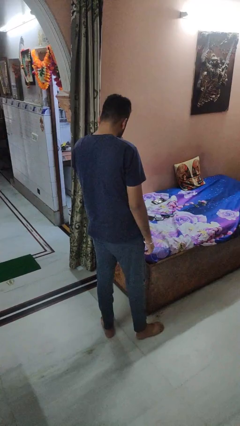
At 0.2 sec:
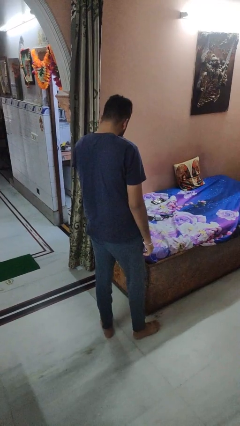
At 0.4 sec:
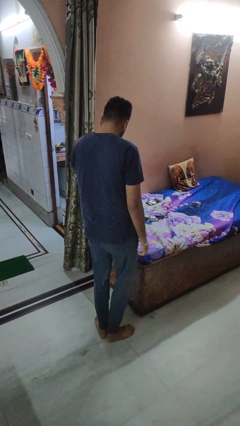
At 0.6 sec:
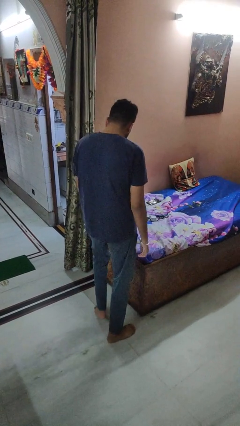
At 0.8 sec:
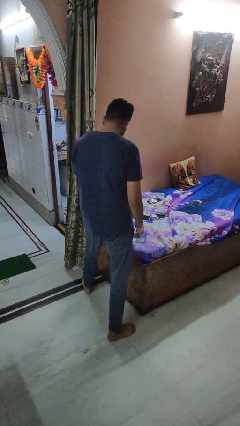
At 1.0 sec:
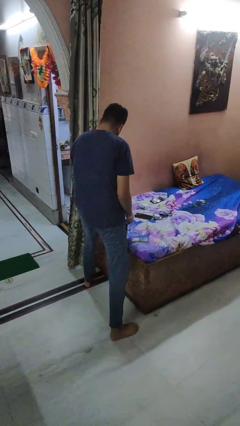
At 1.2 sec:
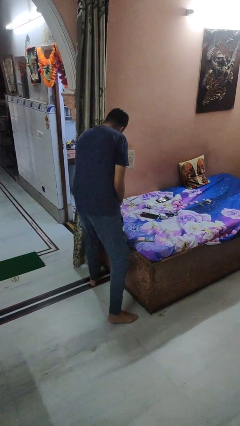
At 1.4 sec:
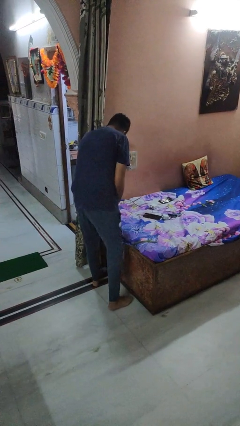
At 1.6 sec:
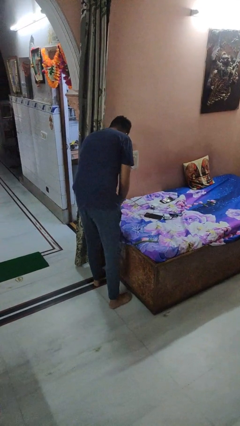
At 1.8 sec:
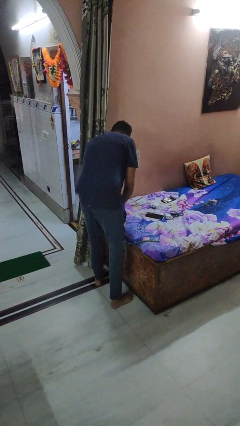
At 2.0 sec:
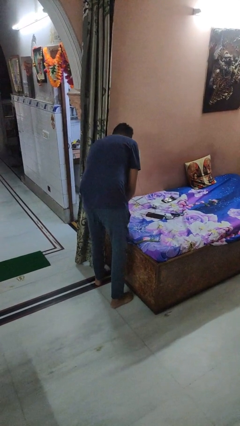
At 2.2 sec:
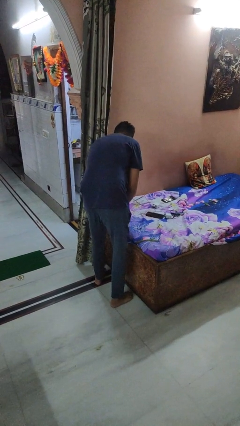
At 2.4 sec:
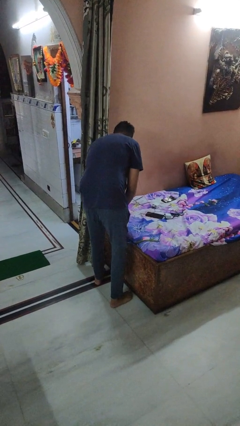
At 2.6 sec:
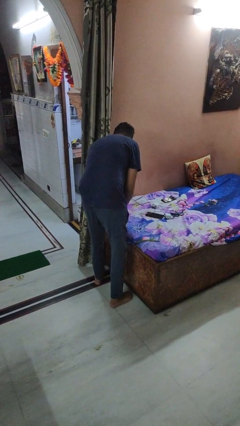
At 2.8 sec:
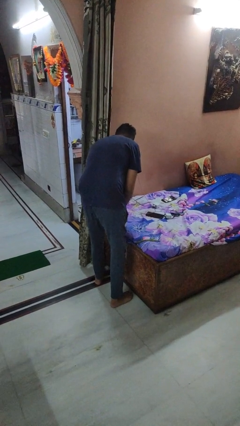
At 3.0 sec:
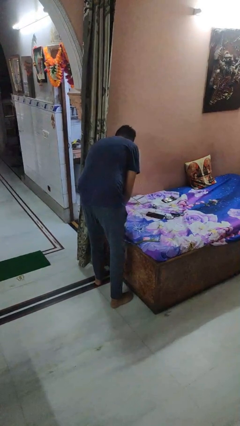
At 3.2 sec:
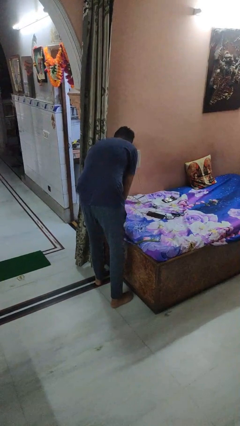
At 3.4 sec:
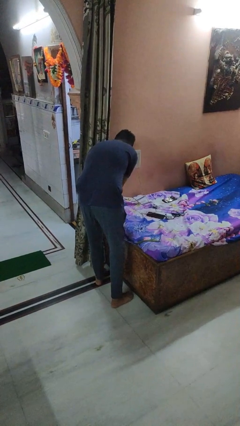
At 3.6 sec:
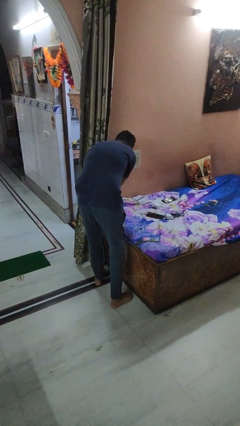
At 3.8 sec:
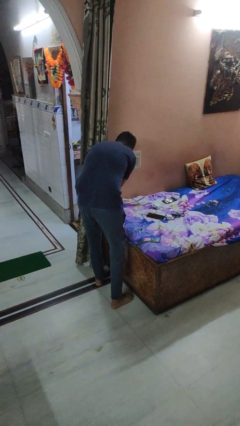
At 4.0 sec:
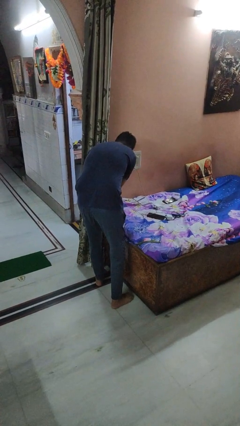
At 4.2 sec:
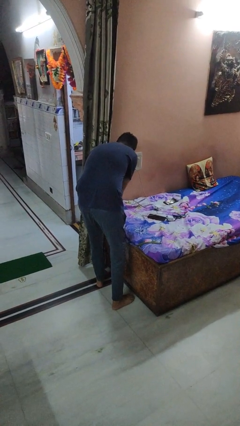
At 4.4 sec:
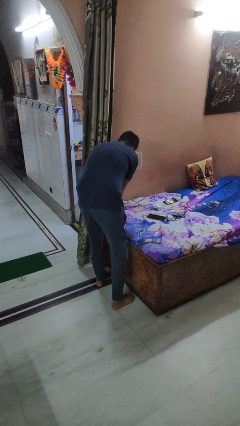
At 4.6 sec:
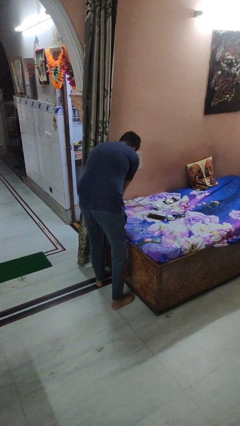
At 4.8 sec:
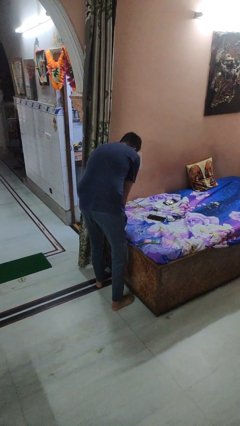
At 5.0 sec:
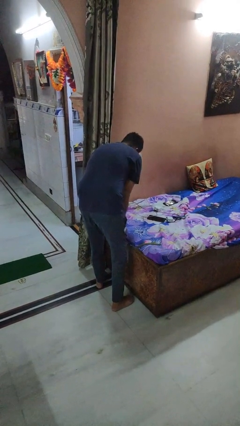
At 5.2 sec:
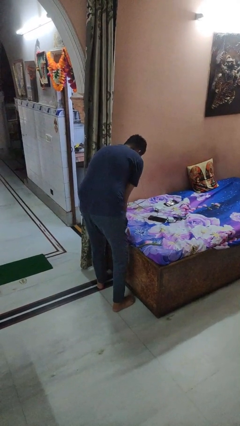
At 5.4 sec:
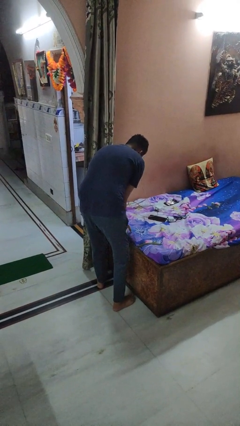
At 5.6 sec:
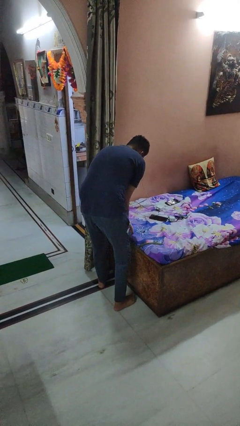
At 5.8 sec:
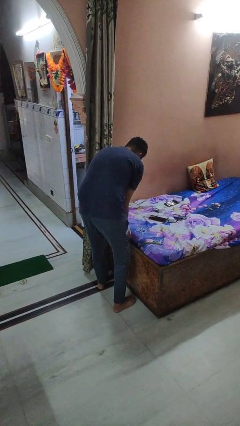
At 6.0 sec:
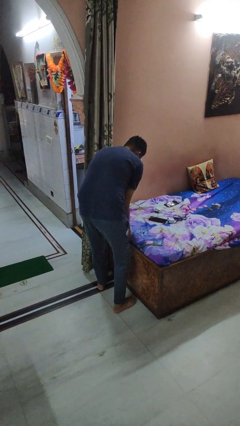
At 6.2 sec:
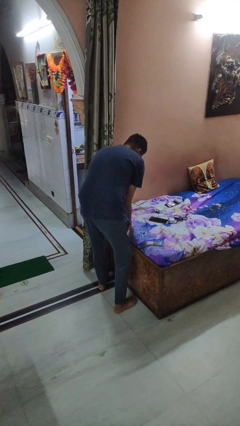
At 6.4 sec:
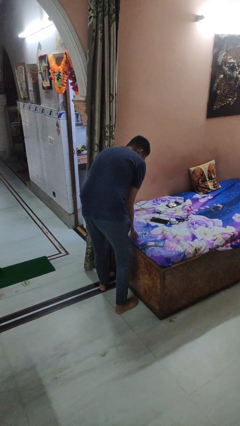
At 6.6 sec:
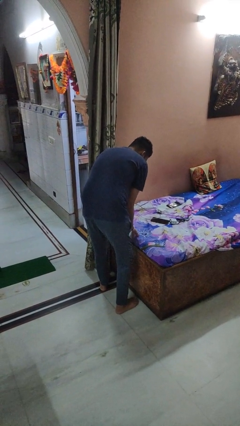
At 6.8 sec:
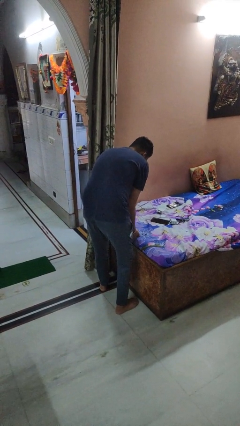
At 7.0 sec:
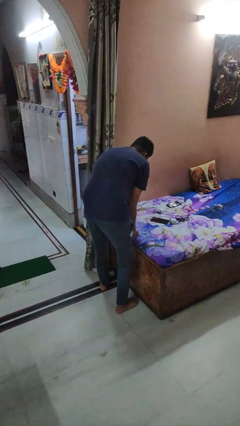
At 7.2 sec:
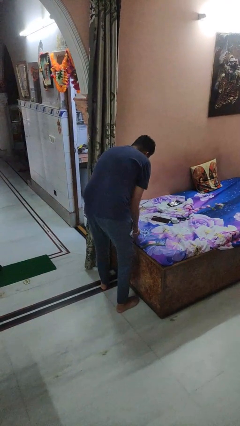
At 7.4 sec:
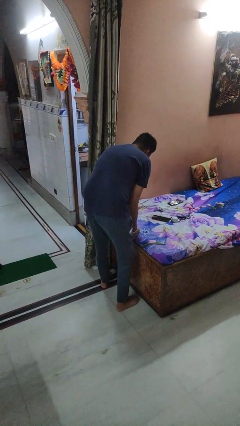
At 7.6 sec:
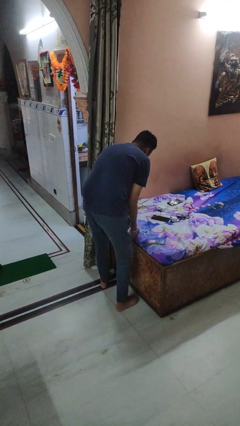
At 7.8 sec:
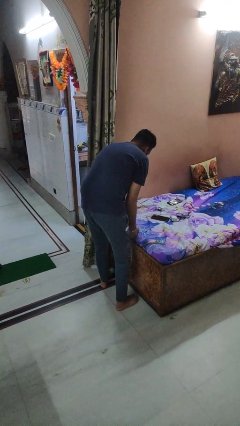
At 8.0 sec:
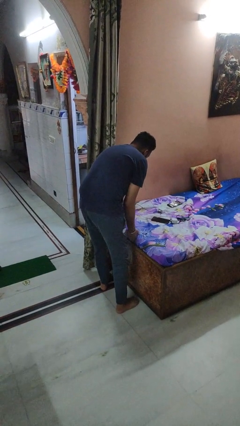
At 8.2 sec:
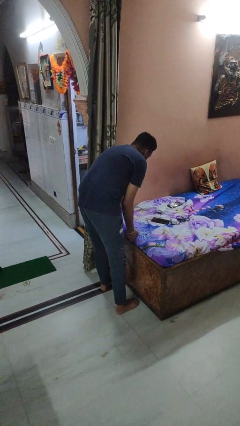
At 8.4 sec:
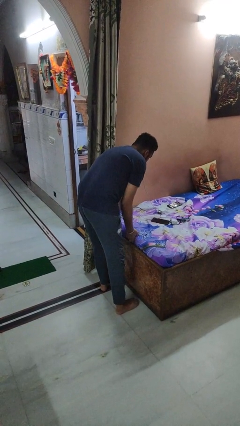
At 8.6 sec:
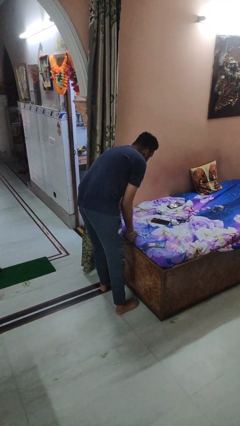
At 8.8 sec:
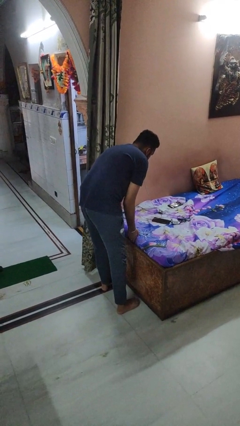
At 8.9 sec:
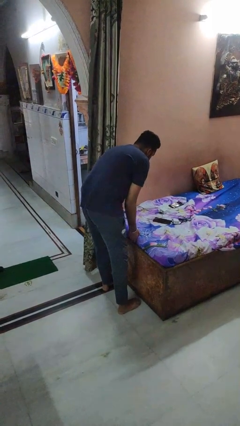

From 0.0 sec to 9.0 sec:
person makes bed

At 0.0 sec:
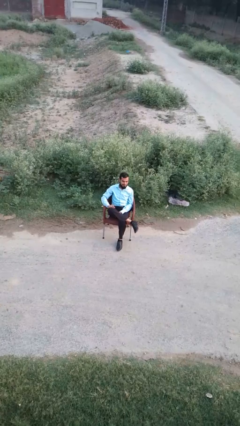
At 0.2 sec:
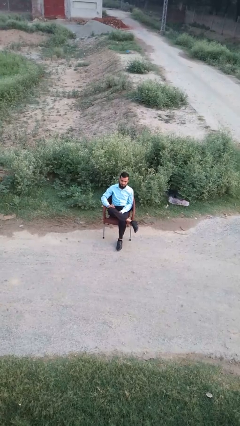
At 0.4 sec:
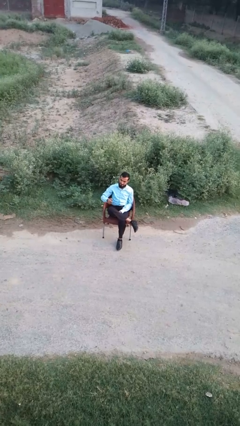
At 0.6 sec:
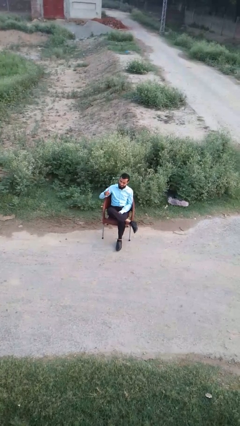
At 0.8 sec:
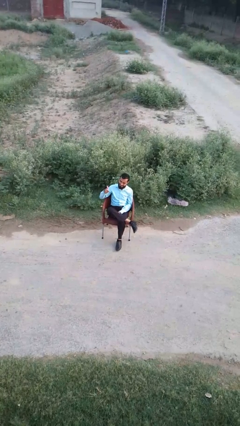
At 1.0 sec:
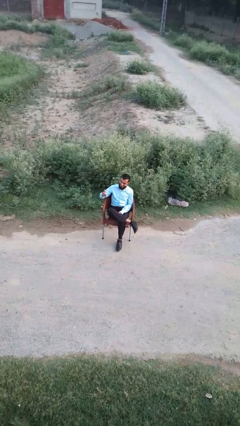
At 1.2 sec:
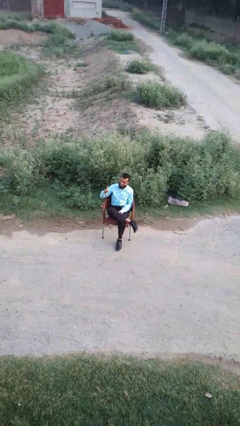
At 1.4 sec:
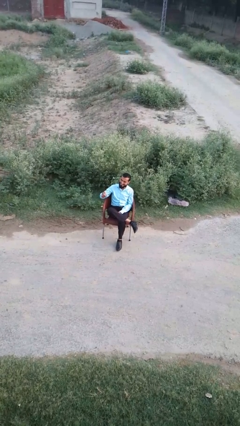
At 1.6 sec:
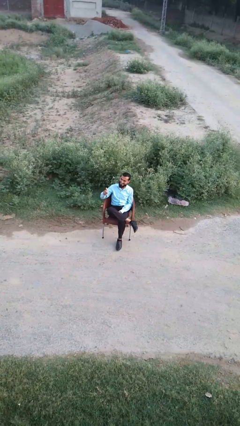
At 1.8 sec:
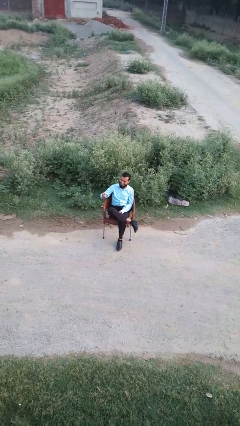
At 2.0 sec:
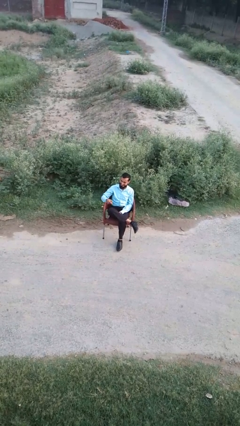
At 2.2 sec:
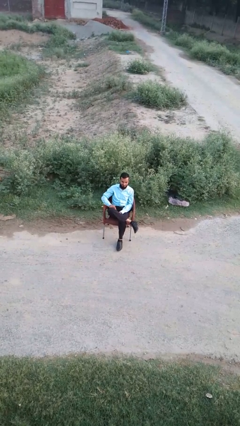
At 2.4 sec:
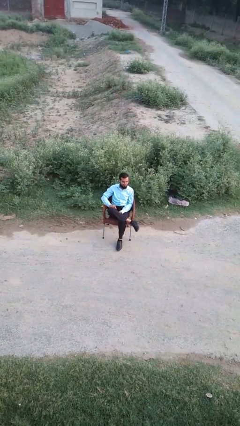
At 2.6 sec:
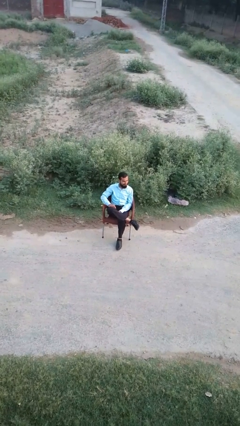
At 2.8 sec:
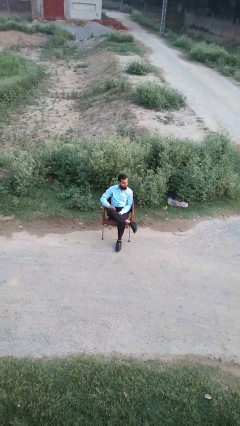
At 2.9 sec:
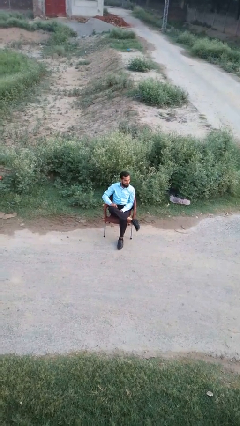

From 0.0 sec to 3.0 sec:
person gestures thumbs up

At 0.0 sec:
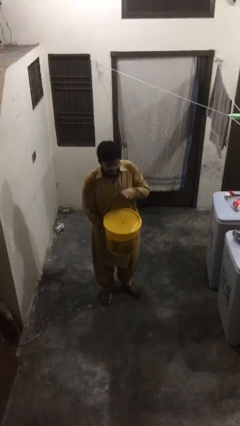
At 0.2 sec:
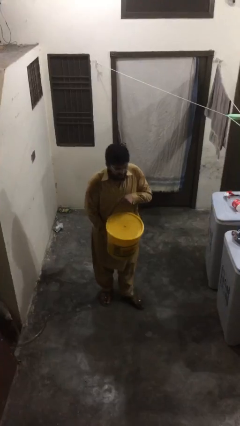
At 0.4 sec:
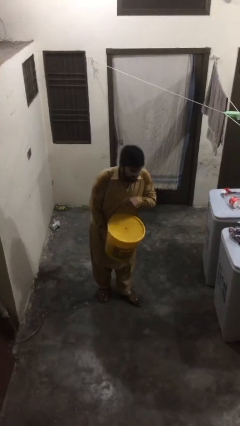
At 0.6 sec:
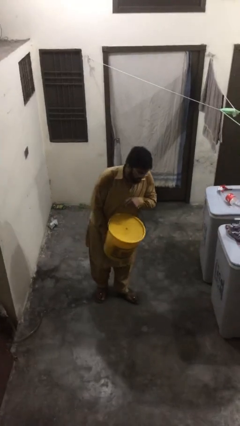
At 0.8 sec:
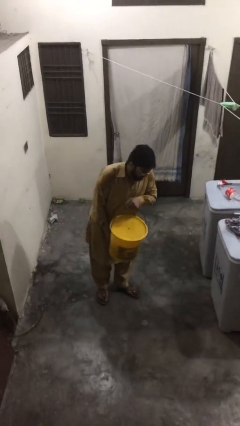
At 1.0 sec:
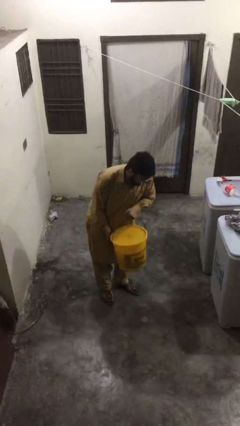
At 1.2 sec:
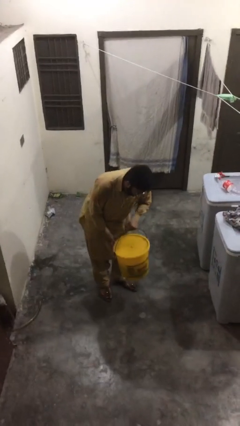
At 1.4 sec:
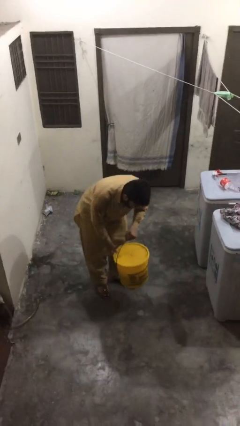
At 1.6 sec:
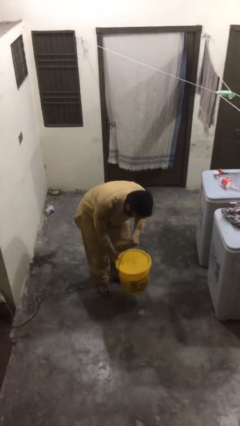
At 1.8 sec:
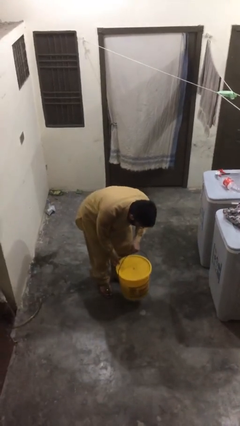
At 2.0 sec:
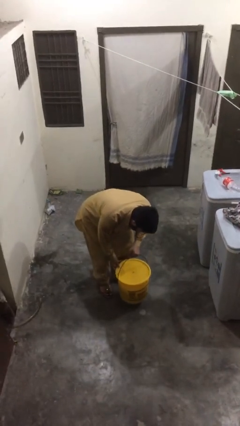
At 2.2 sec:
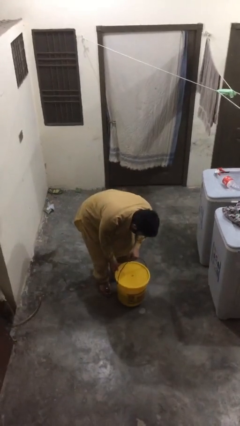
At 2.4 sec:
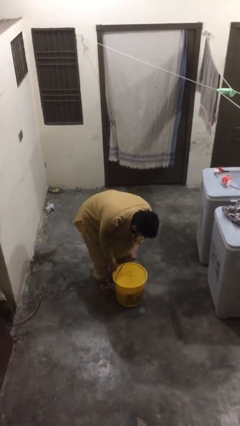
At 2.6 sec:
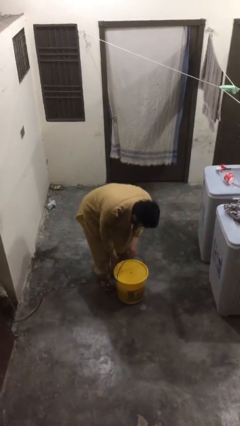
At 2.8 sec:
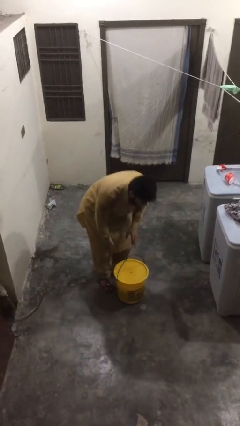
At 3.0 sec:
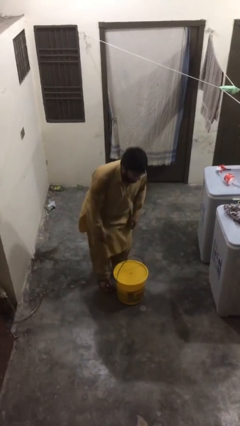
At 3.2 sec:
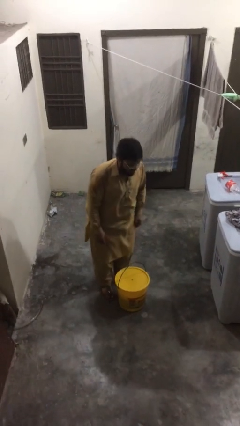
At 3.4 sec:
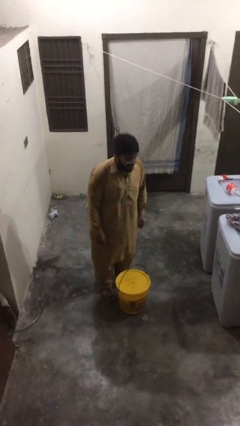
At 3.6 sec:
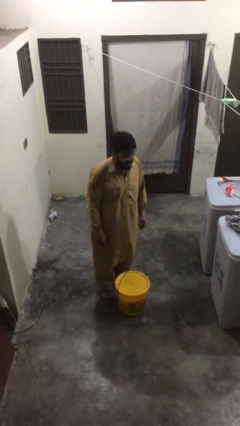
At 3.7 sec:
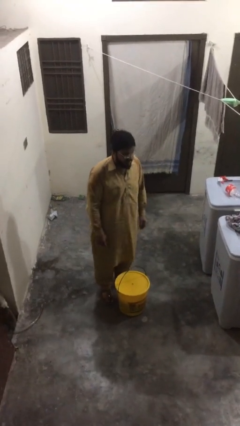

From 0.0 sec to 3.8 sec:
person puts down object on floor

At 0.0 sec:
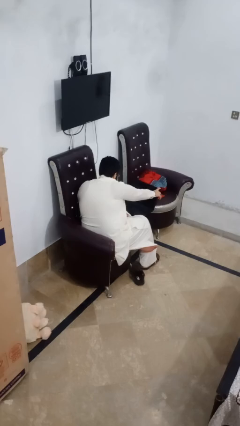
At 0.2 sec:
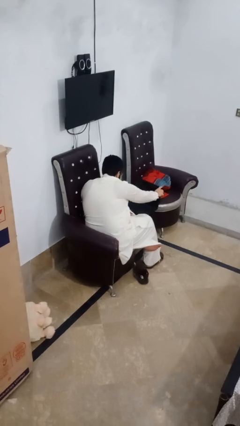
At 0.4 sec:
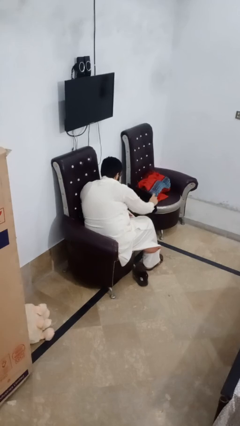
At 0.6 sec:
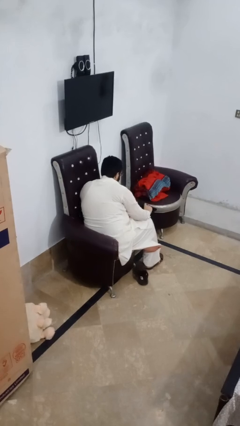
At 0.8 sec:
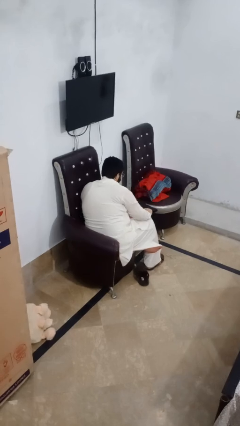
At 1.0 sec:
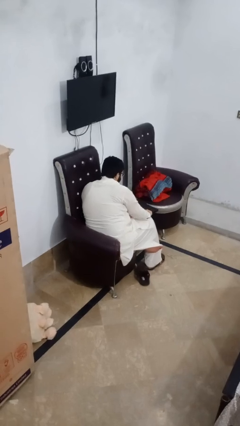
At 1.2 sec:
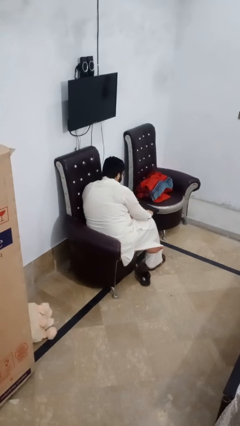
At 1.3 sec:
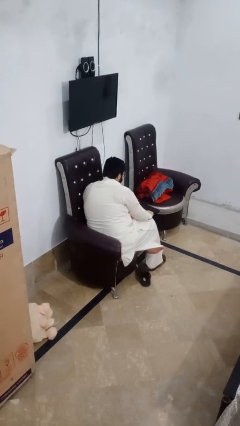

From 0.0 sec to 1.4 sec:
person closes laptop

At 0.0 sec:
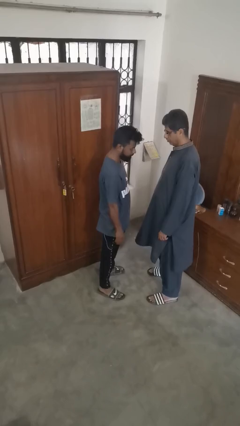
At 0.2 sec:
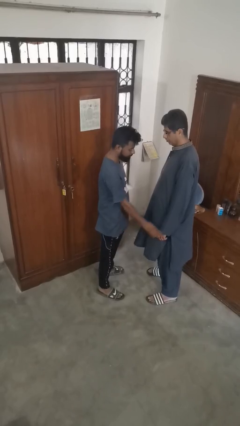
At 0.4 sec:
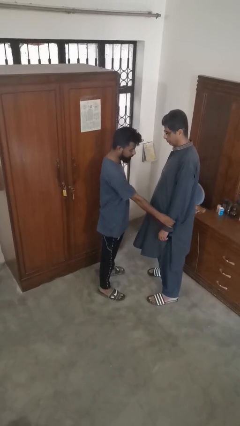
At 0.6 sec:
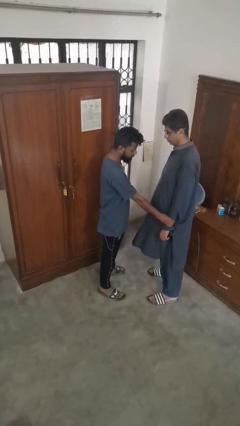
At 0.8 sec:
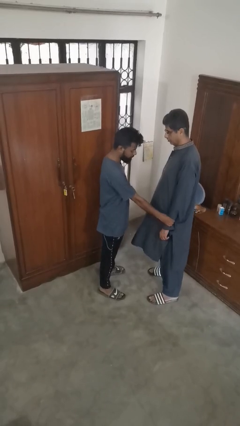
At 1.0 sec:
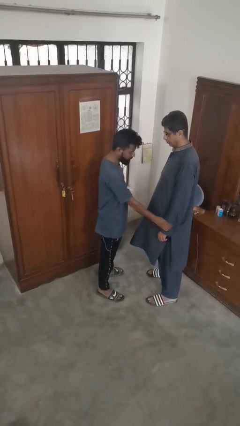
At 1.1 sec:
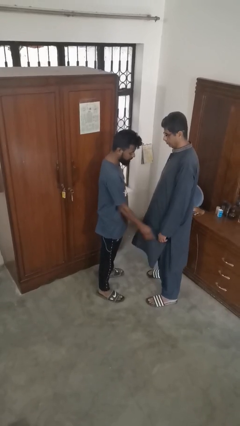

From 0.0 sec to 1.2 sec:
person grabs person by forearm
